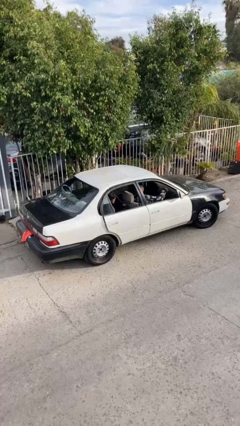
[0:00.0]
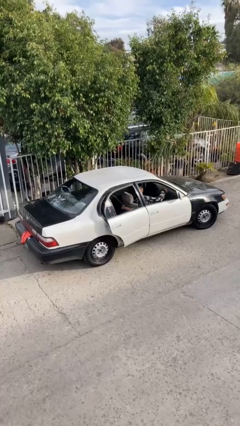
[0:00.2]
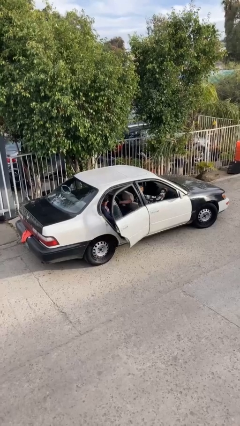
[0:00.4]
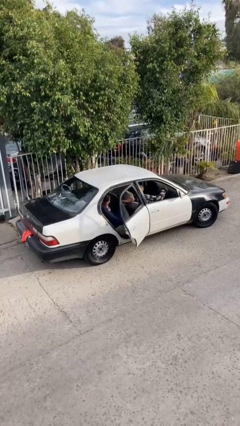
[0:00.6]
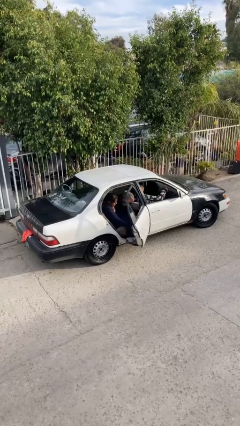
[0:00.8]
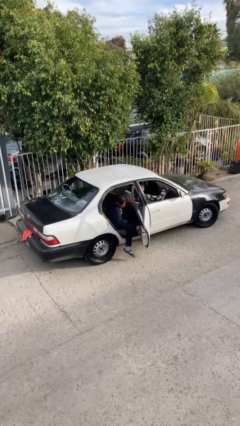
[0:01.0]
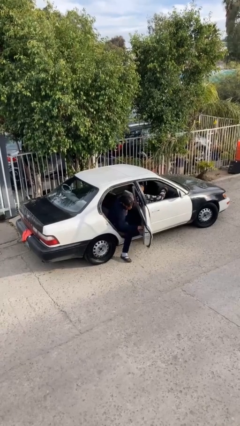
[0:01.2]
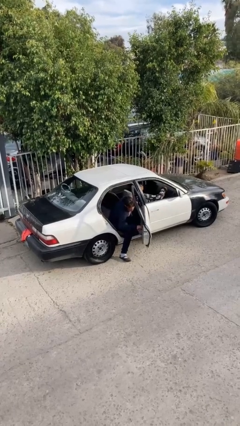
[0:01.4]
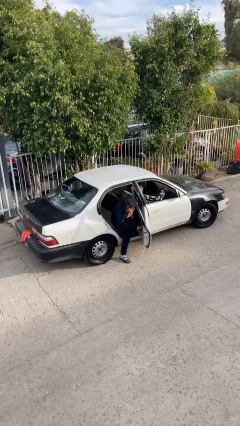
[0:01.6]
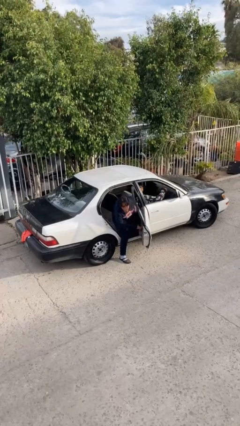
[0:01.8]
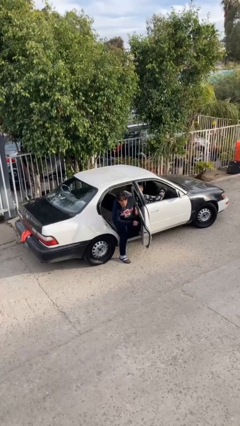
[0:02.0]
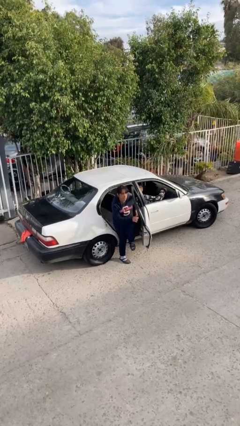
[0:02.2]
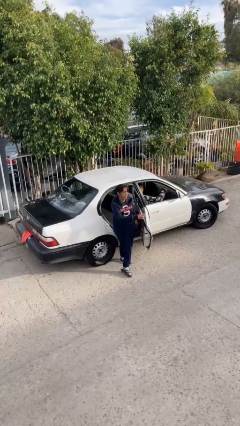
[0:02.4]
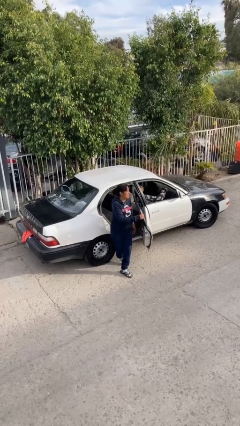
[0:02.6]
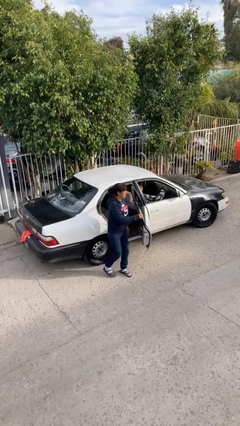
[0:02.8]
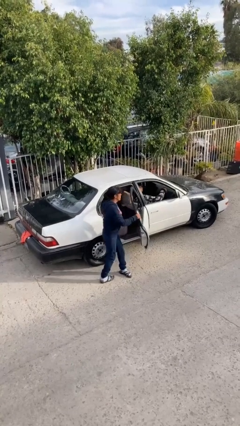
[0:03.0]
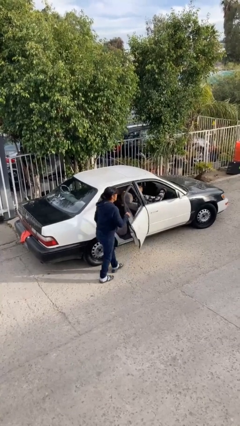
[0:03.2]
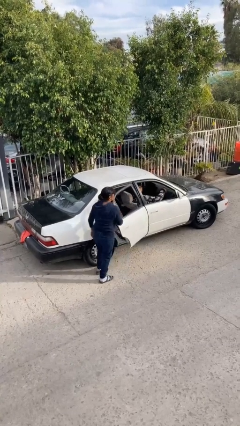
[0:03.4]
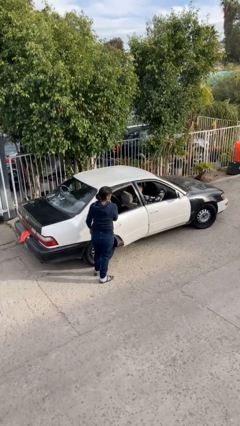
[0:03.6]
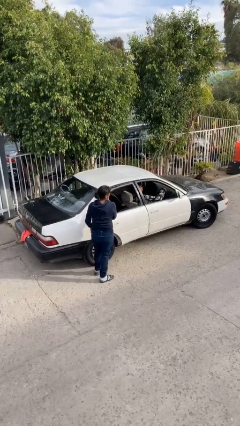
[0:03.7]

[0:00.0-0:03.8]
car drops off person

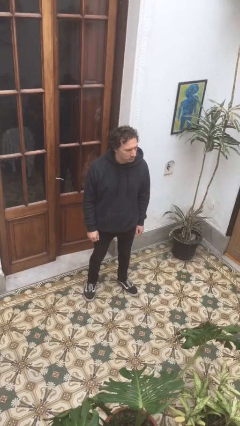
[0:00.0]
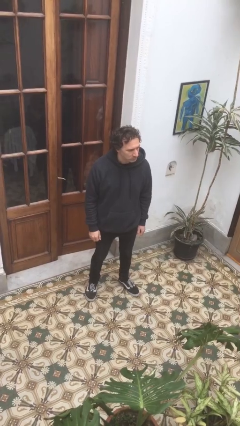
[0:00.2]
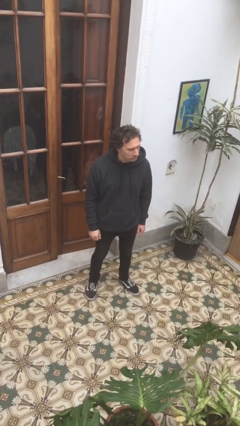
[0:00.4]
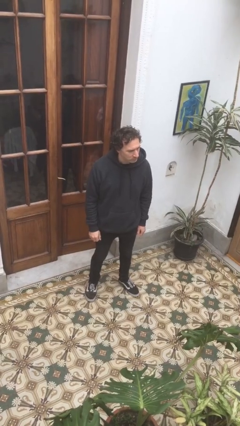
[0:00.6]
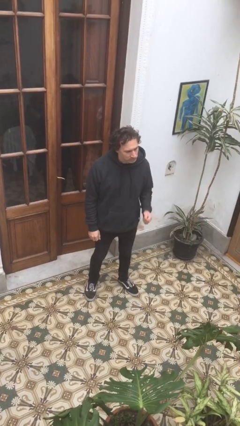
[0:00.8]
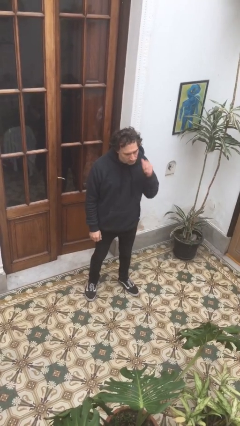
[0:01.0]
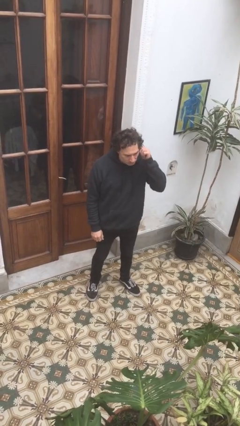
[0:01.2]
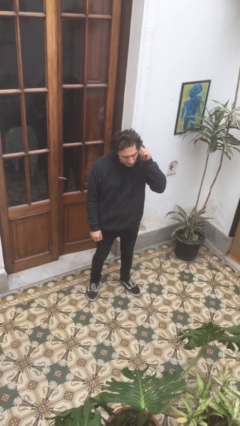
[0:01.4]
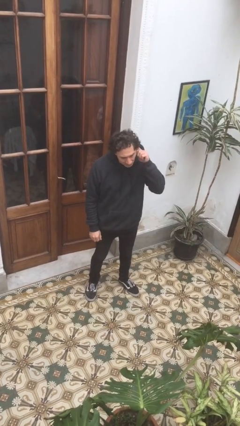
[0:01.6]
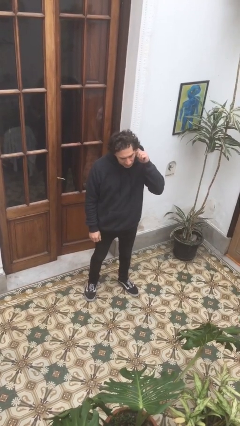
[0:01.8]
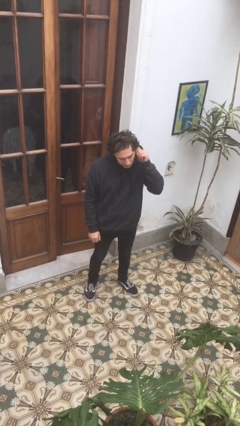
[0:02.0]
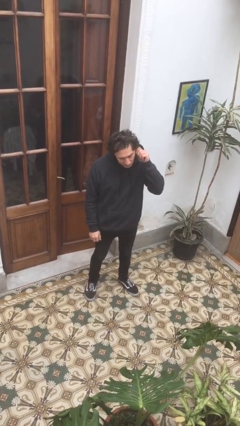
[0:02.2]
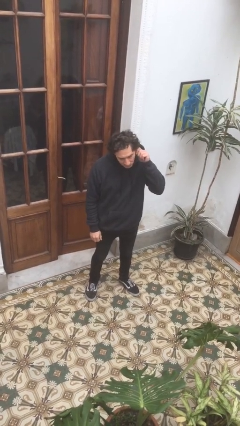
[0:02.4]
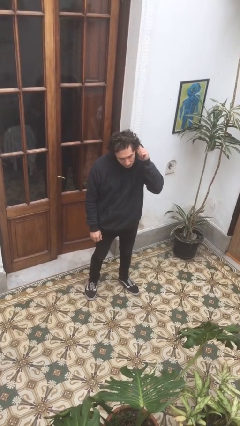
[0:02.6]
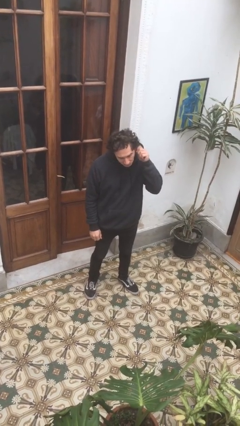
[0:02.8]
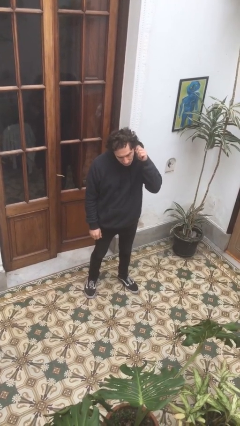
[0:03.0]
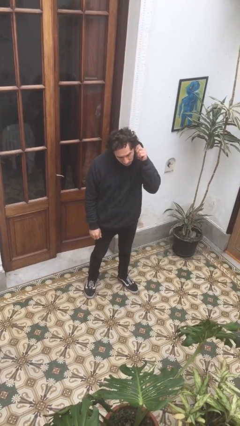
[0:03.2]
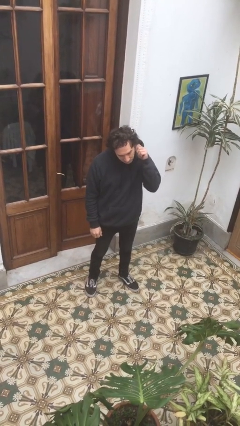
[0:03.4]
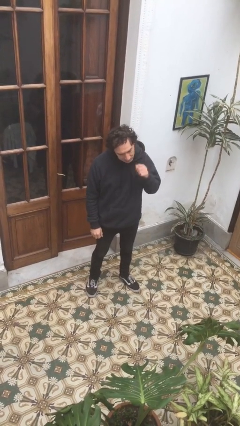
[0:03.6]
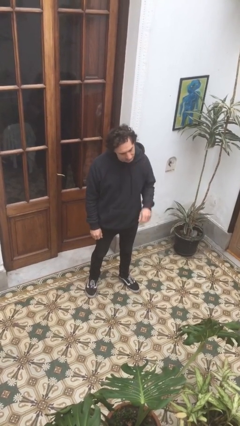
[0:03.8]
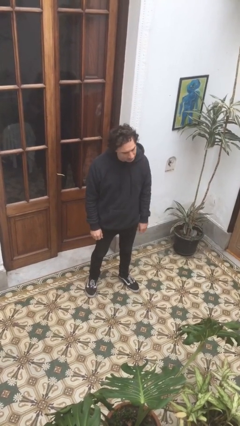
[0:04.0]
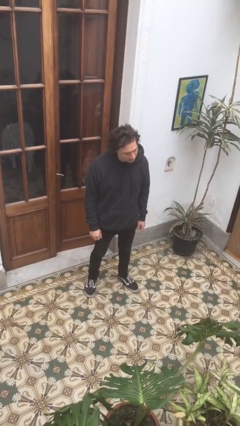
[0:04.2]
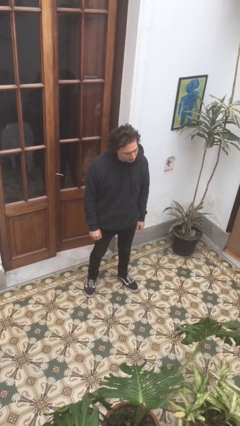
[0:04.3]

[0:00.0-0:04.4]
person touches earlobe

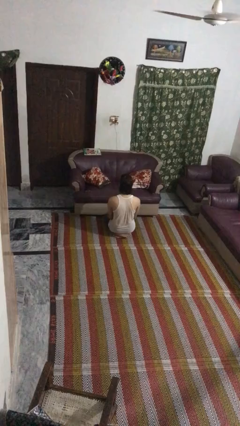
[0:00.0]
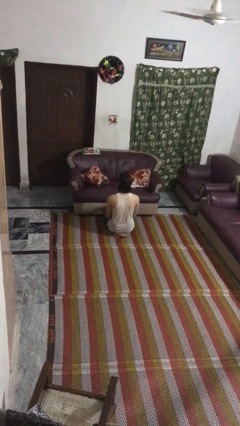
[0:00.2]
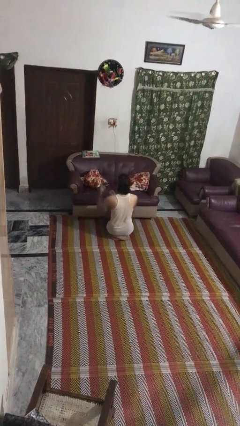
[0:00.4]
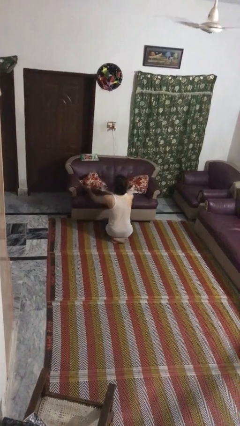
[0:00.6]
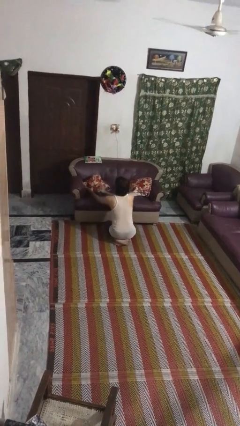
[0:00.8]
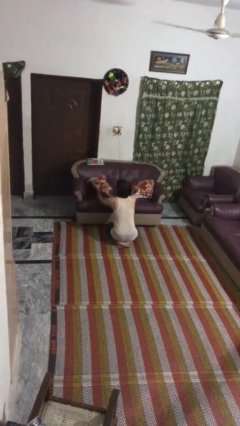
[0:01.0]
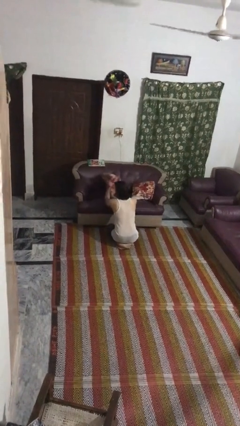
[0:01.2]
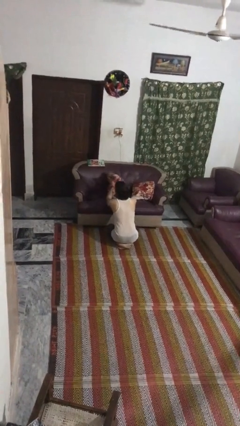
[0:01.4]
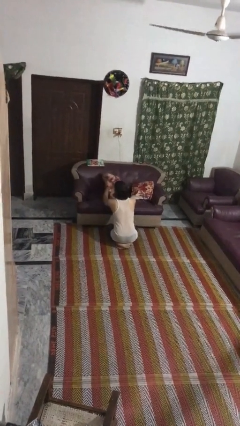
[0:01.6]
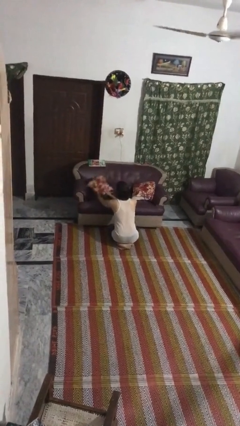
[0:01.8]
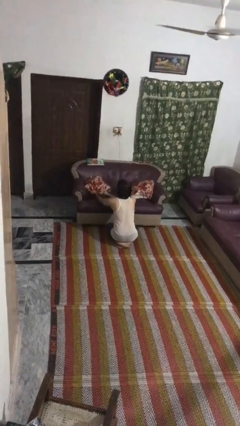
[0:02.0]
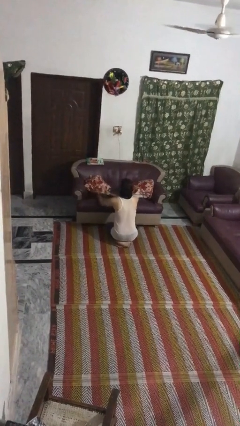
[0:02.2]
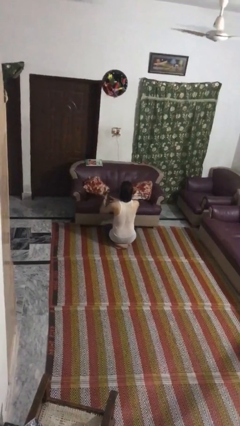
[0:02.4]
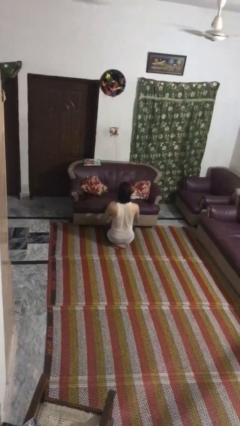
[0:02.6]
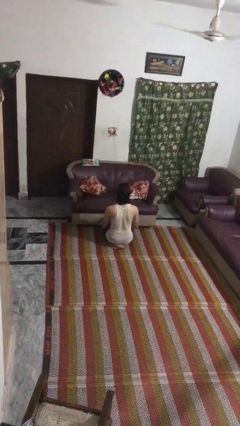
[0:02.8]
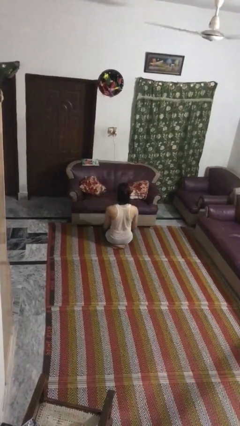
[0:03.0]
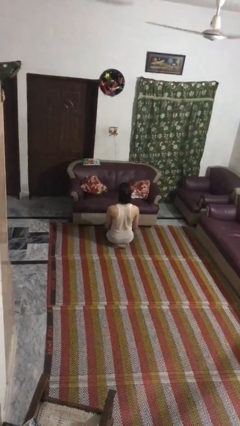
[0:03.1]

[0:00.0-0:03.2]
person searches in couch

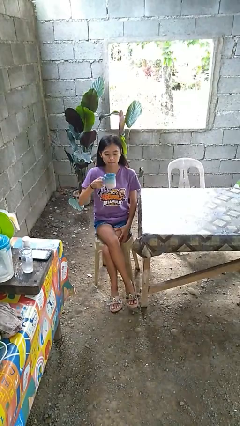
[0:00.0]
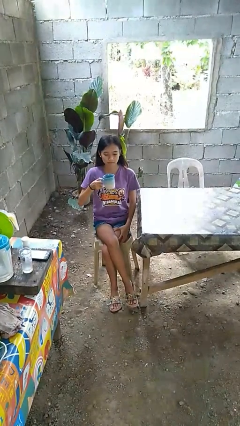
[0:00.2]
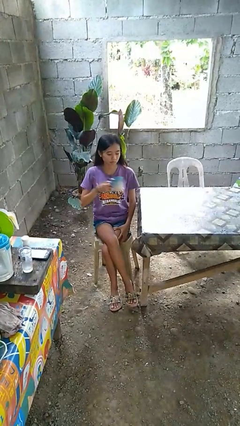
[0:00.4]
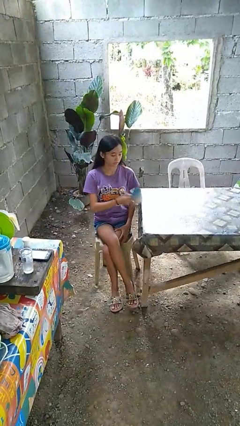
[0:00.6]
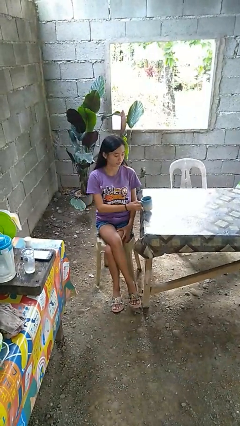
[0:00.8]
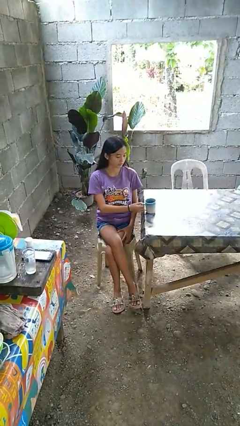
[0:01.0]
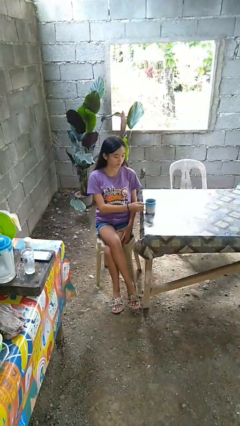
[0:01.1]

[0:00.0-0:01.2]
person puts down object on table

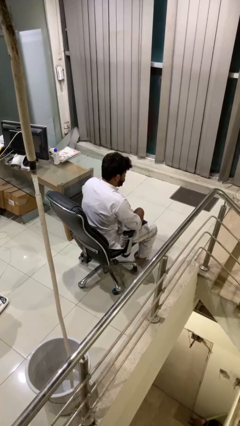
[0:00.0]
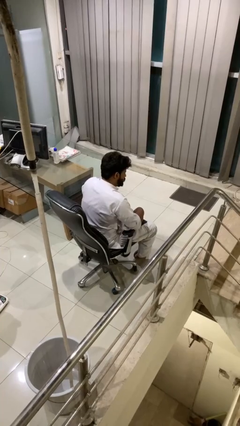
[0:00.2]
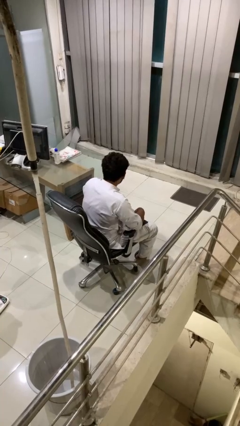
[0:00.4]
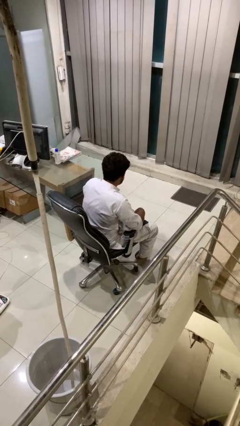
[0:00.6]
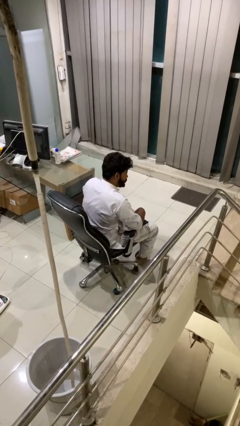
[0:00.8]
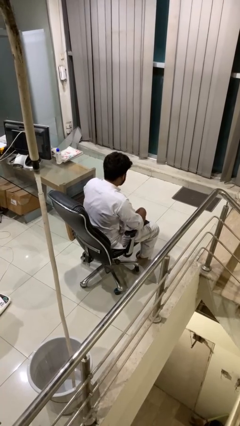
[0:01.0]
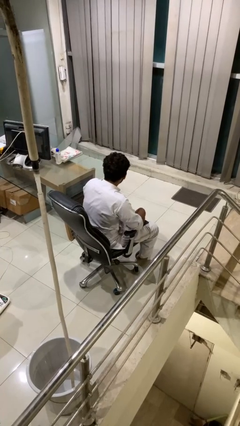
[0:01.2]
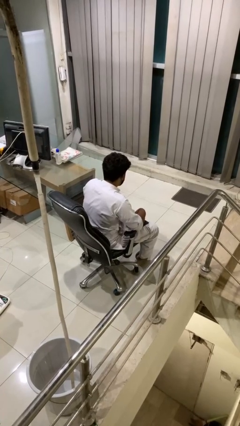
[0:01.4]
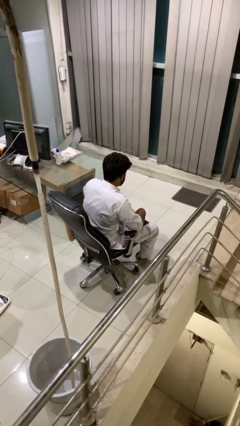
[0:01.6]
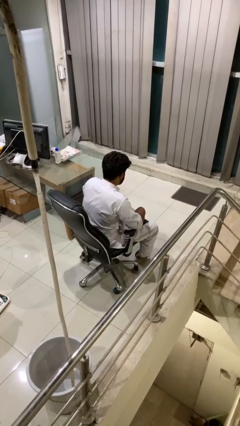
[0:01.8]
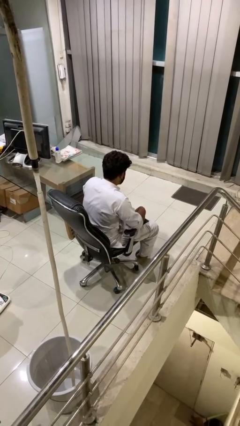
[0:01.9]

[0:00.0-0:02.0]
person shakes head

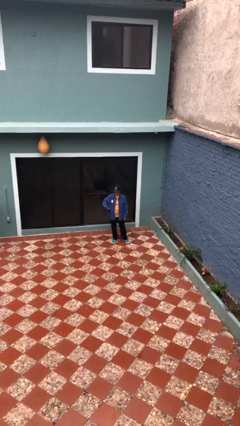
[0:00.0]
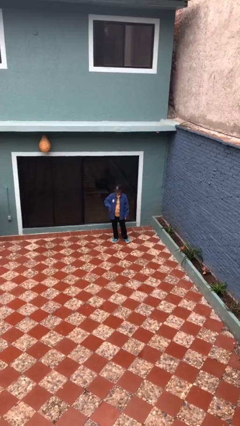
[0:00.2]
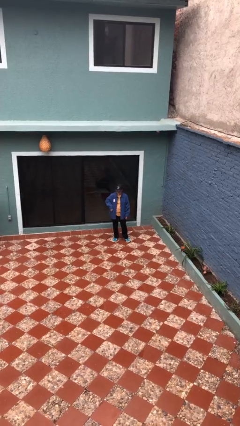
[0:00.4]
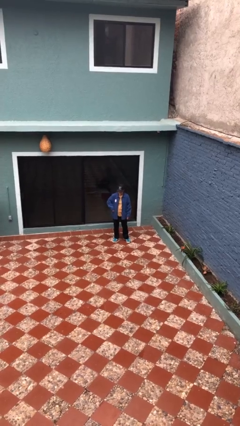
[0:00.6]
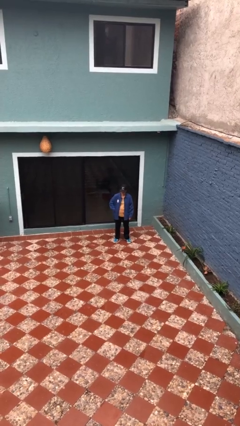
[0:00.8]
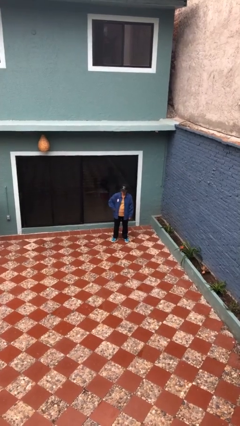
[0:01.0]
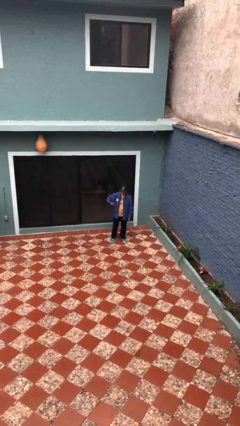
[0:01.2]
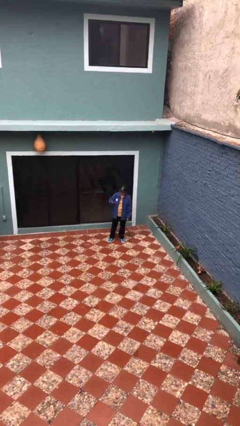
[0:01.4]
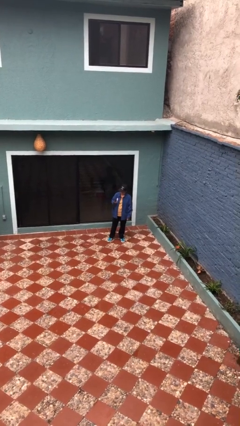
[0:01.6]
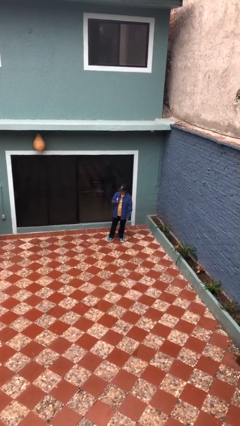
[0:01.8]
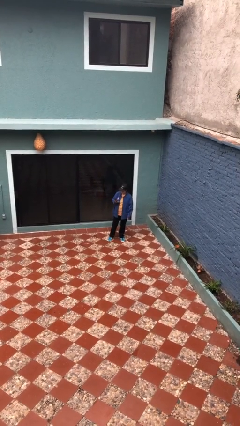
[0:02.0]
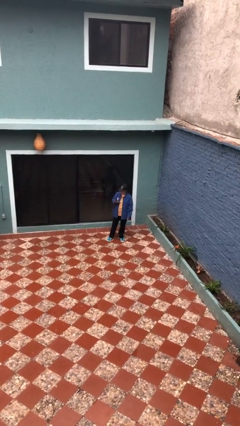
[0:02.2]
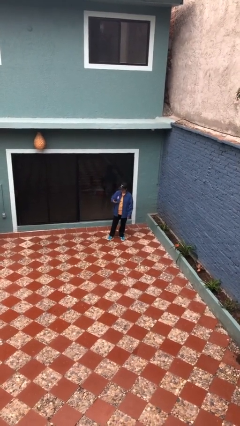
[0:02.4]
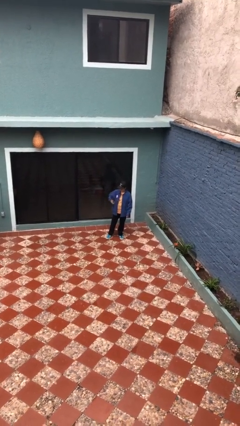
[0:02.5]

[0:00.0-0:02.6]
person takes phone from pocket

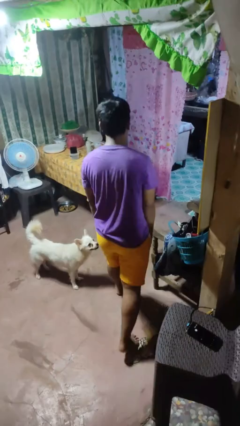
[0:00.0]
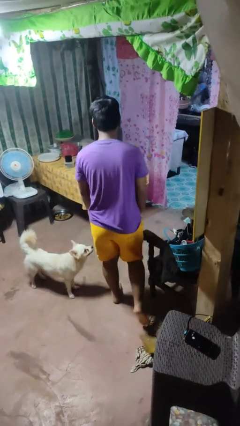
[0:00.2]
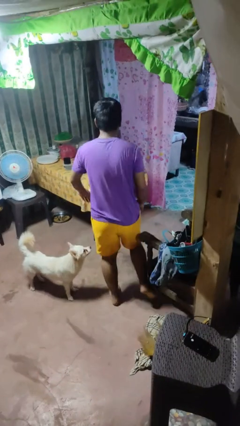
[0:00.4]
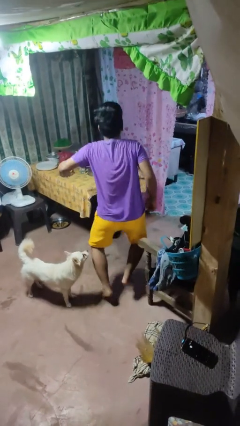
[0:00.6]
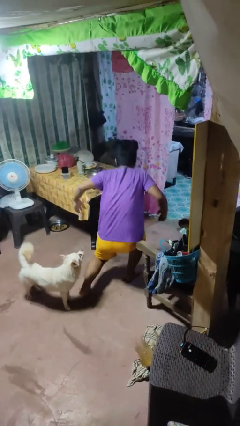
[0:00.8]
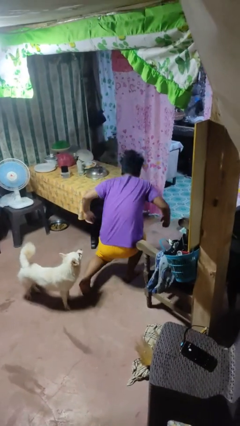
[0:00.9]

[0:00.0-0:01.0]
person trips on object on floor
